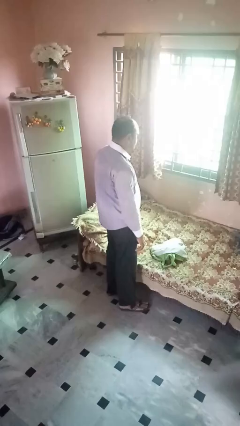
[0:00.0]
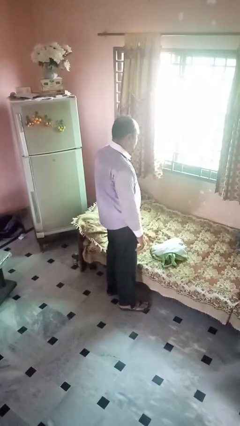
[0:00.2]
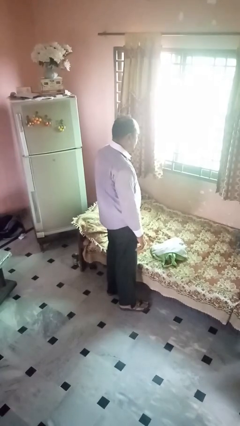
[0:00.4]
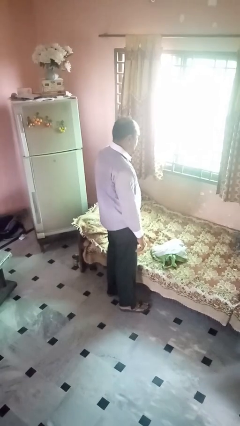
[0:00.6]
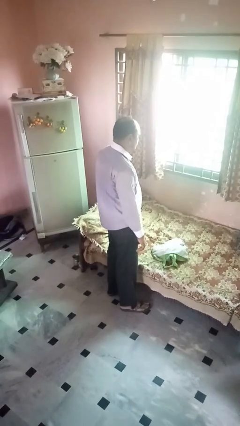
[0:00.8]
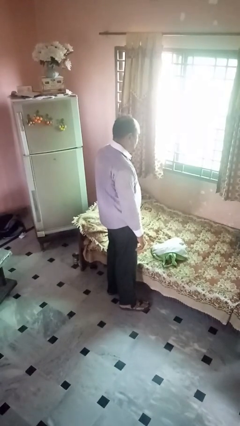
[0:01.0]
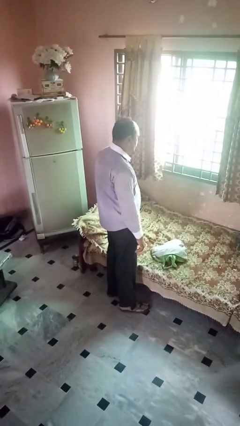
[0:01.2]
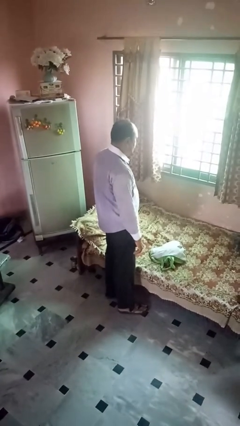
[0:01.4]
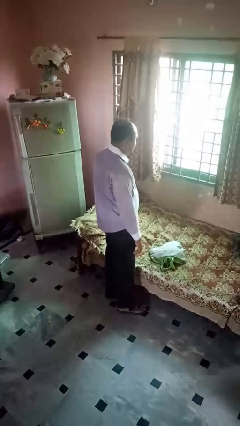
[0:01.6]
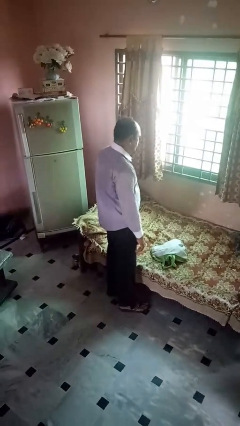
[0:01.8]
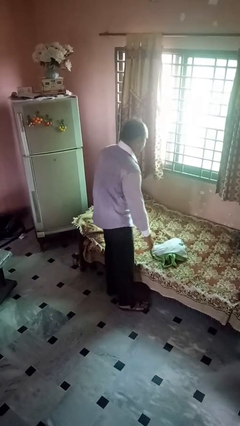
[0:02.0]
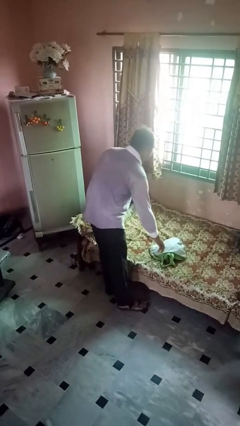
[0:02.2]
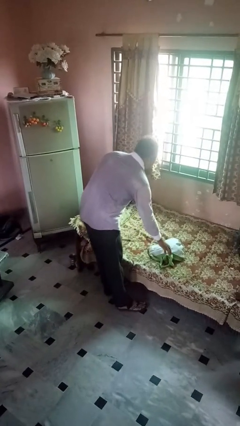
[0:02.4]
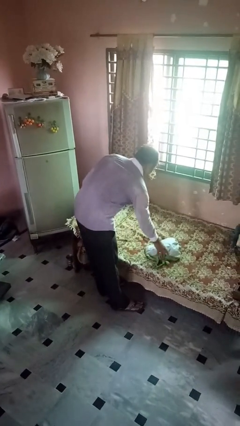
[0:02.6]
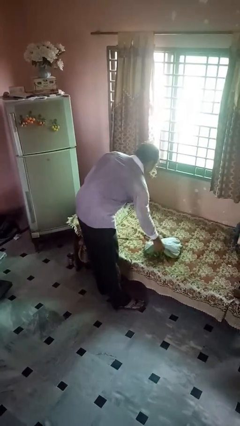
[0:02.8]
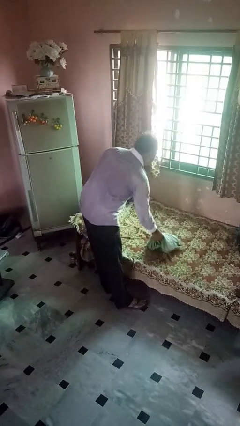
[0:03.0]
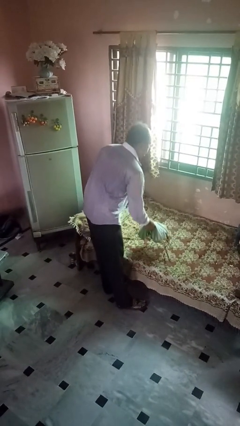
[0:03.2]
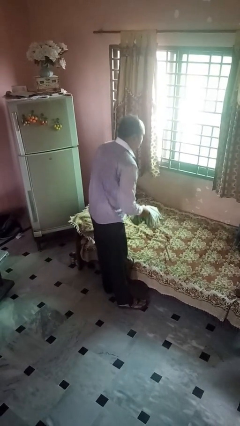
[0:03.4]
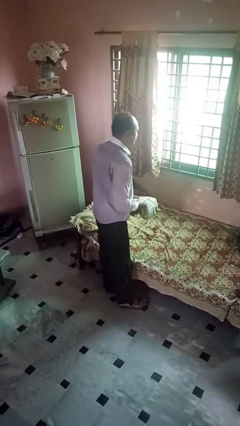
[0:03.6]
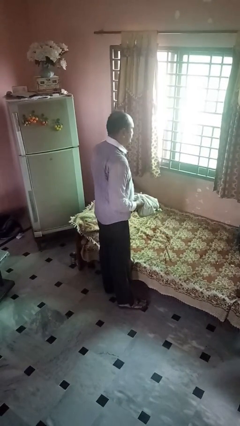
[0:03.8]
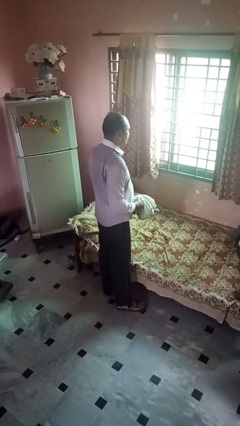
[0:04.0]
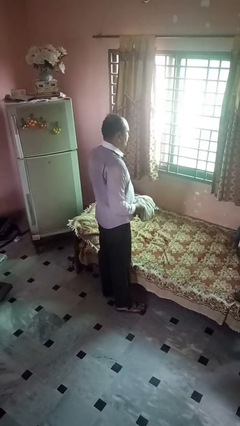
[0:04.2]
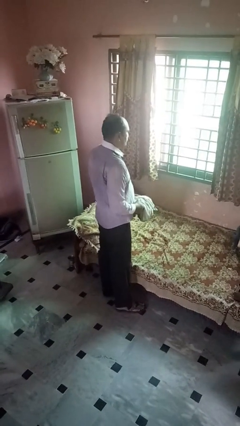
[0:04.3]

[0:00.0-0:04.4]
person picks up object from bed

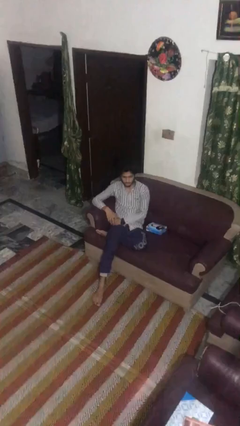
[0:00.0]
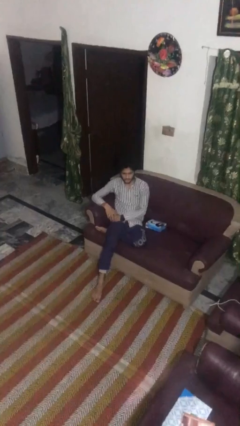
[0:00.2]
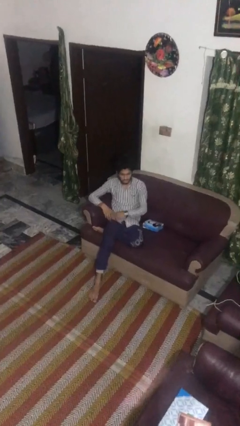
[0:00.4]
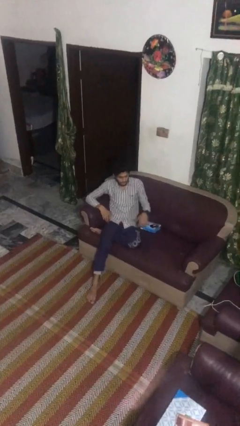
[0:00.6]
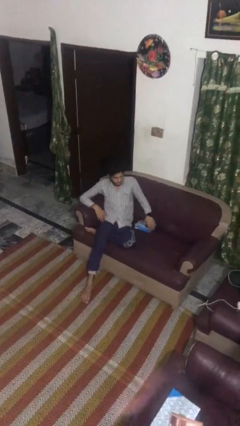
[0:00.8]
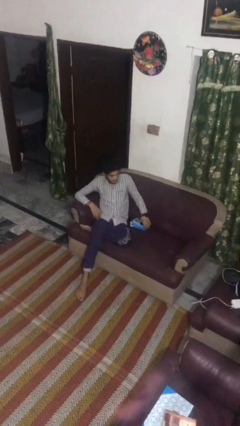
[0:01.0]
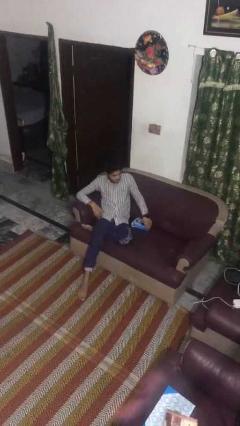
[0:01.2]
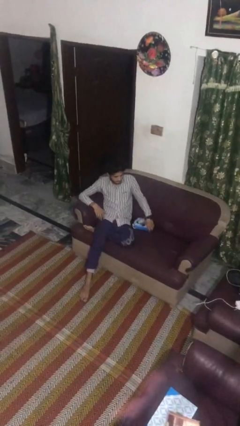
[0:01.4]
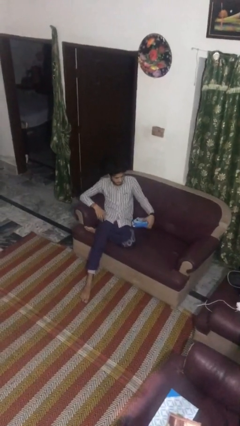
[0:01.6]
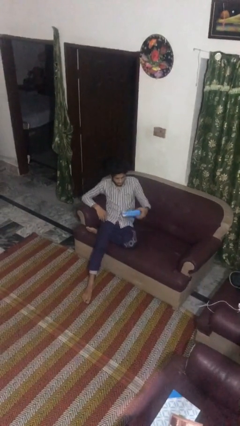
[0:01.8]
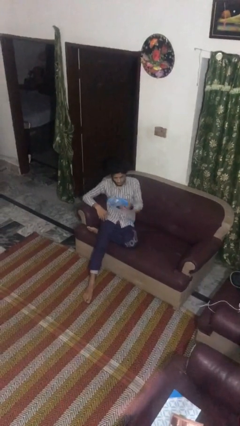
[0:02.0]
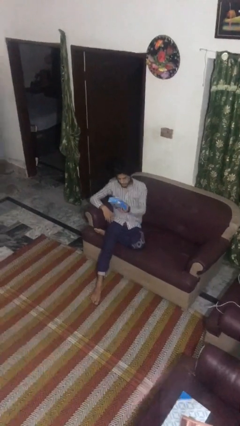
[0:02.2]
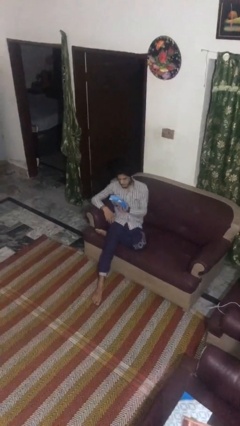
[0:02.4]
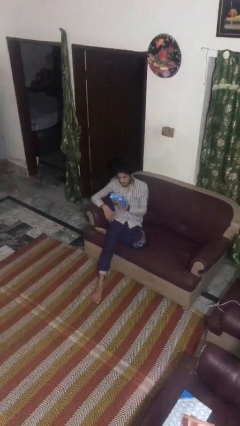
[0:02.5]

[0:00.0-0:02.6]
person picks up object from couch

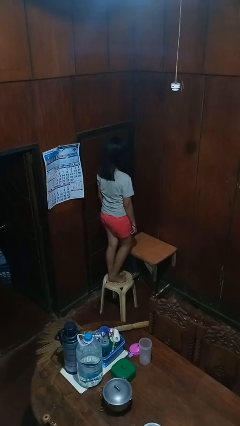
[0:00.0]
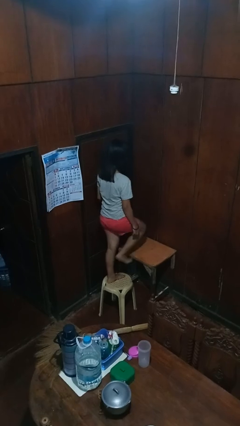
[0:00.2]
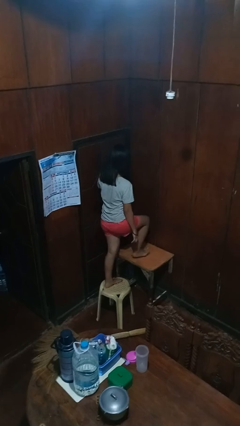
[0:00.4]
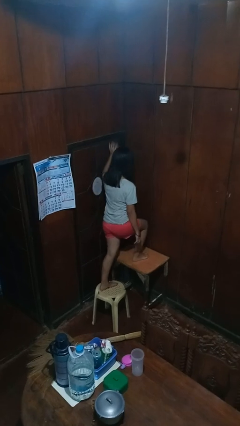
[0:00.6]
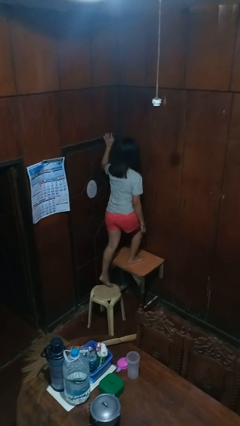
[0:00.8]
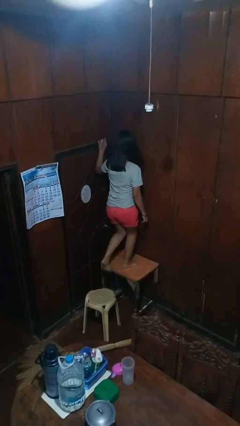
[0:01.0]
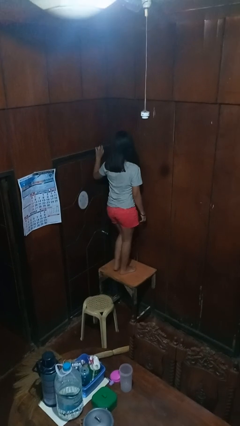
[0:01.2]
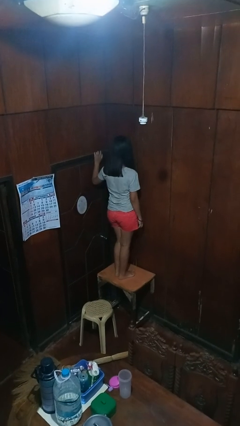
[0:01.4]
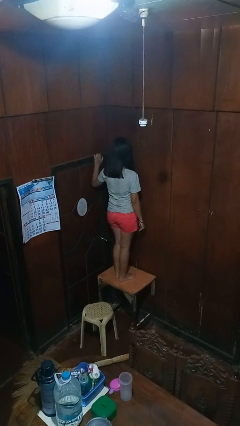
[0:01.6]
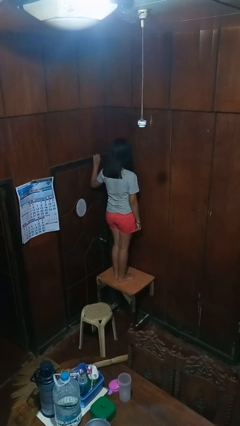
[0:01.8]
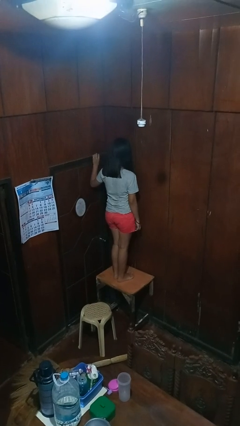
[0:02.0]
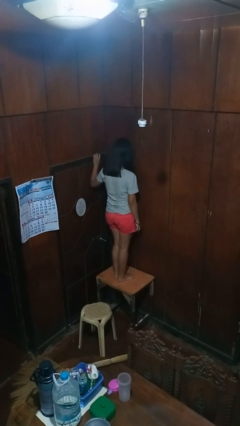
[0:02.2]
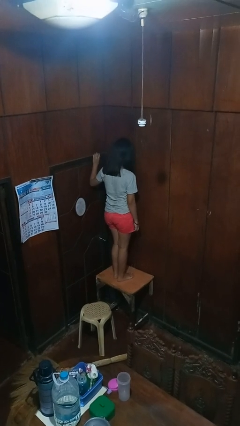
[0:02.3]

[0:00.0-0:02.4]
person climbs on table

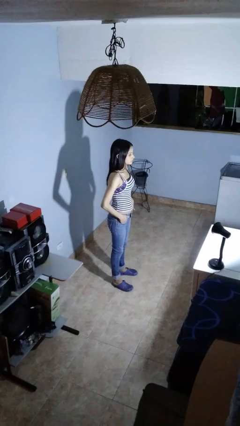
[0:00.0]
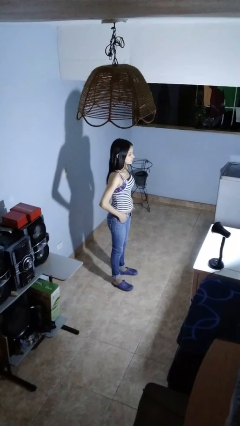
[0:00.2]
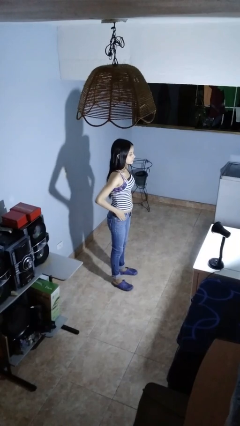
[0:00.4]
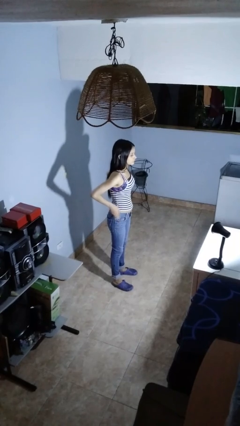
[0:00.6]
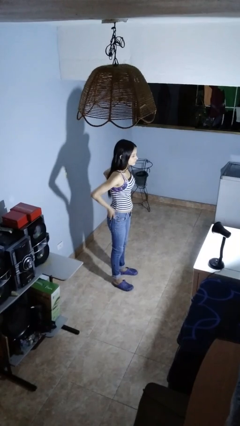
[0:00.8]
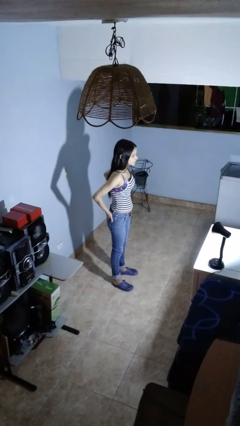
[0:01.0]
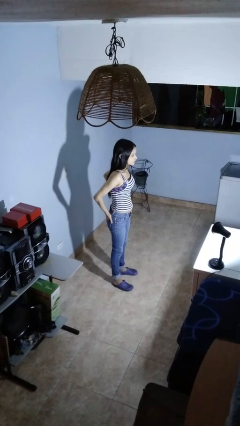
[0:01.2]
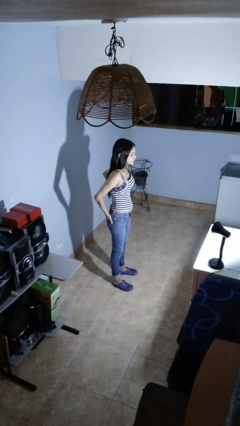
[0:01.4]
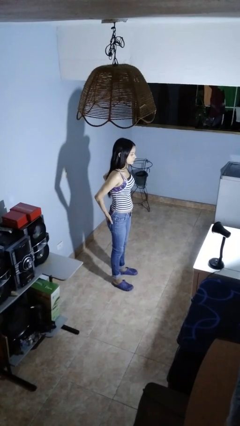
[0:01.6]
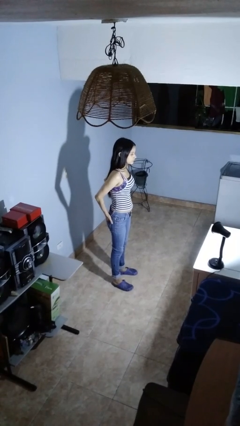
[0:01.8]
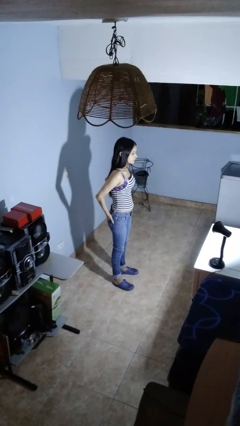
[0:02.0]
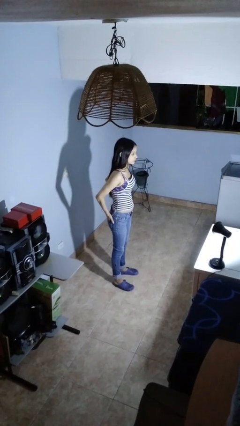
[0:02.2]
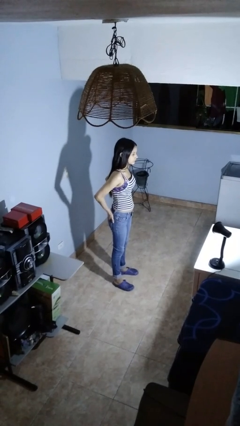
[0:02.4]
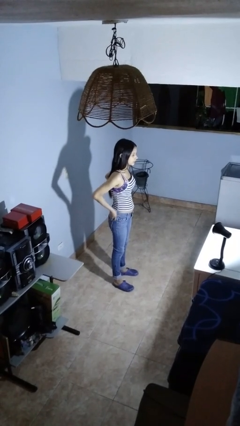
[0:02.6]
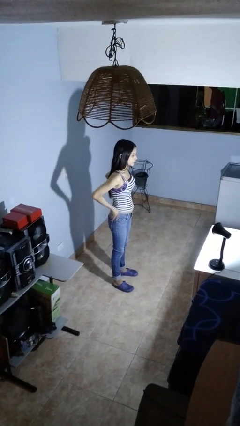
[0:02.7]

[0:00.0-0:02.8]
person puts hands in back pockets

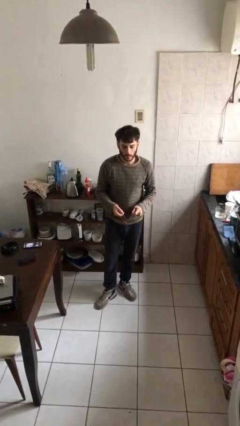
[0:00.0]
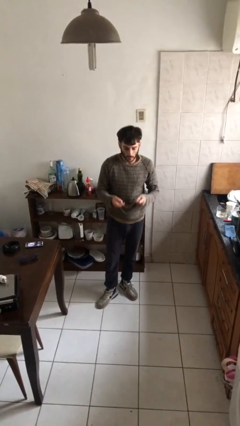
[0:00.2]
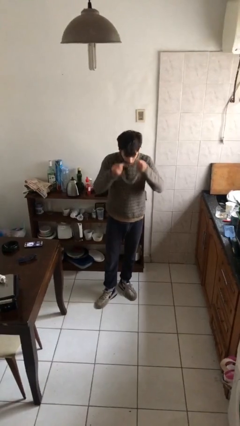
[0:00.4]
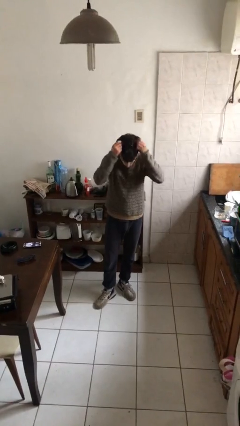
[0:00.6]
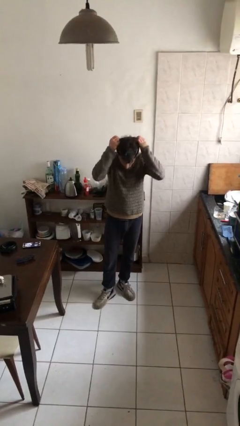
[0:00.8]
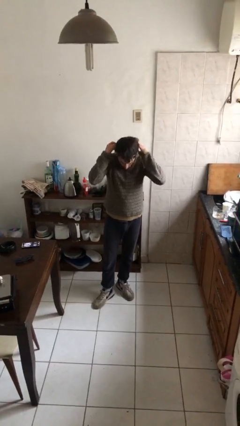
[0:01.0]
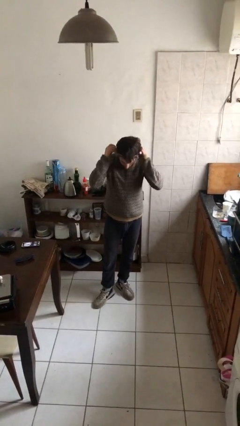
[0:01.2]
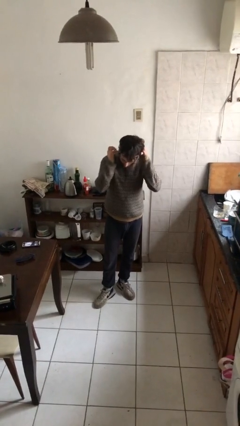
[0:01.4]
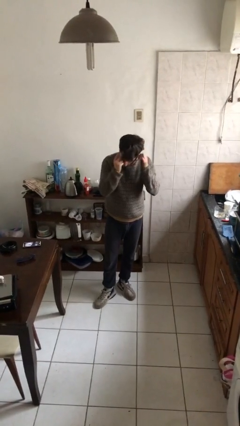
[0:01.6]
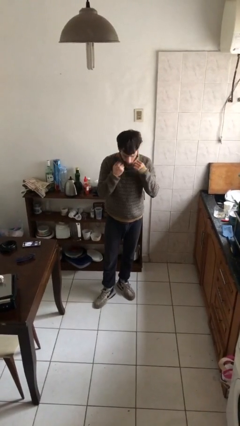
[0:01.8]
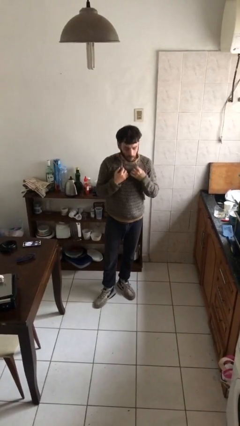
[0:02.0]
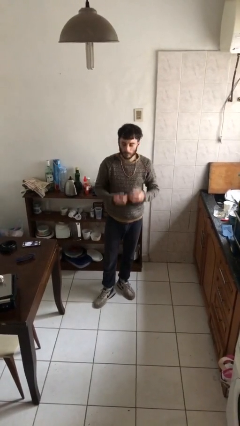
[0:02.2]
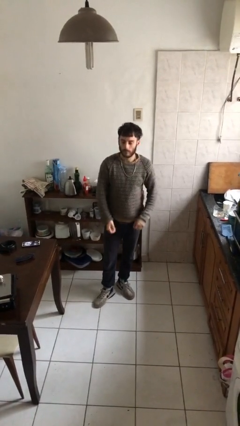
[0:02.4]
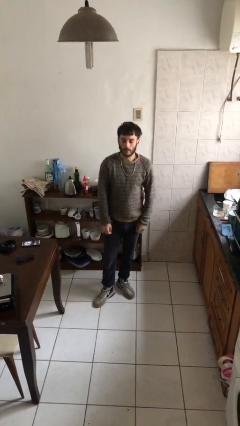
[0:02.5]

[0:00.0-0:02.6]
person puts on necklace

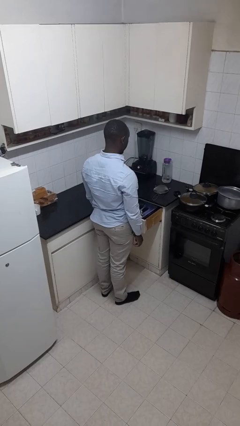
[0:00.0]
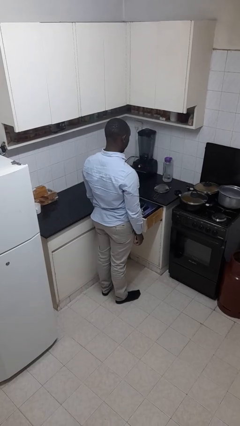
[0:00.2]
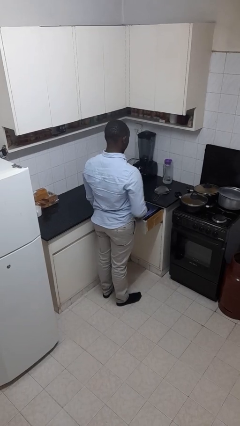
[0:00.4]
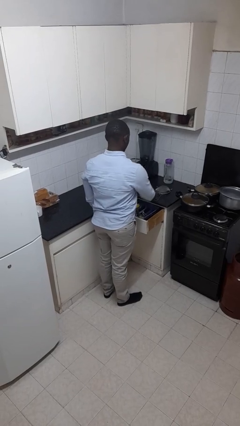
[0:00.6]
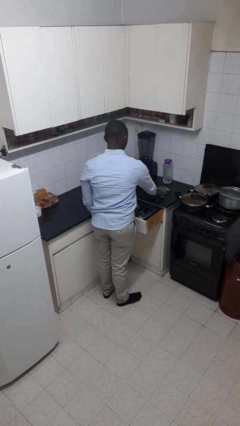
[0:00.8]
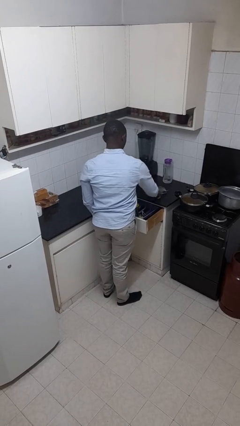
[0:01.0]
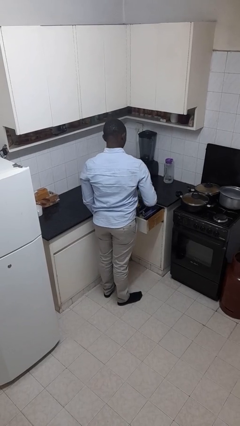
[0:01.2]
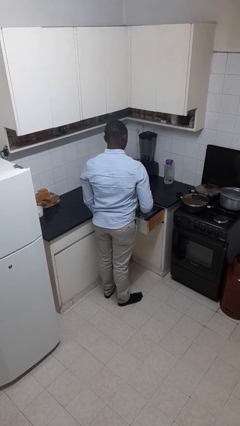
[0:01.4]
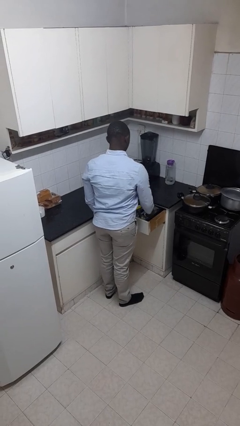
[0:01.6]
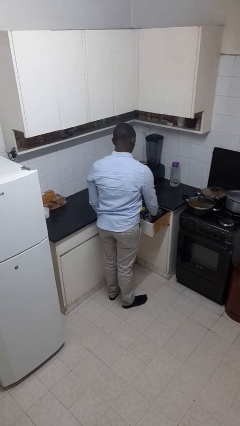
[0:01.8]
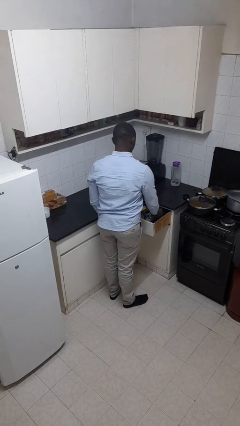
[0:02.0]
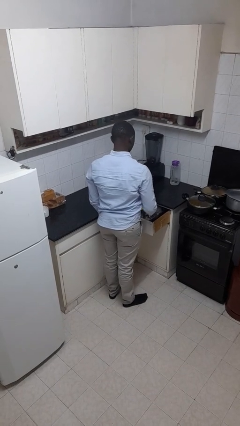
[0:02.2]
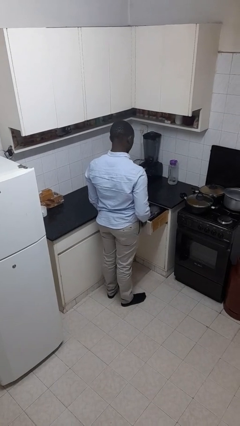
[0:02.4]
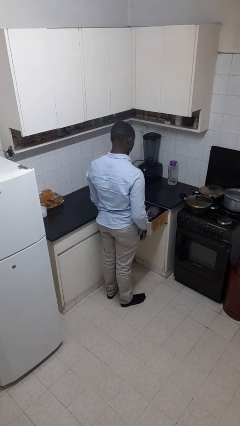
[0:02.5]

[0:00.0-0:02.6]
person puts object into kitchen drawer
